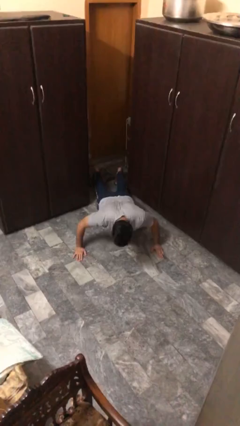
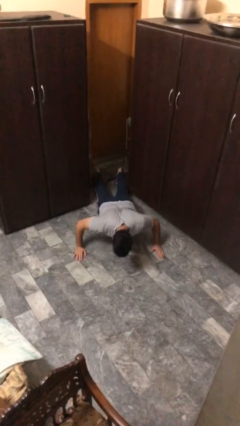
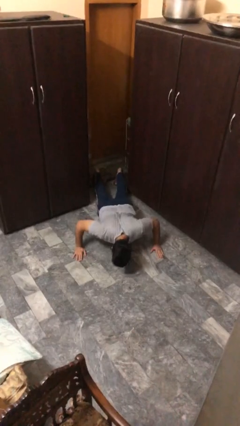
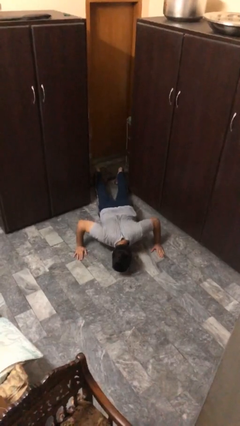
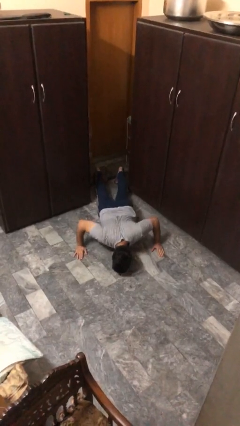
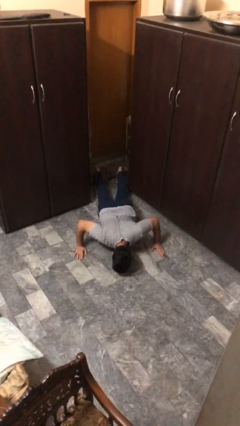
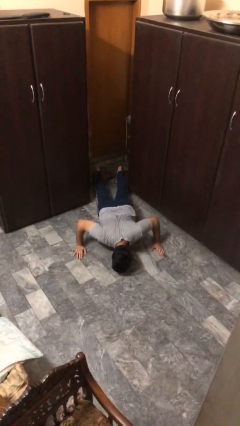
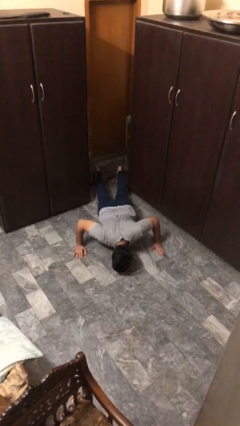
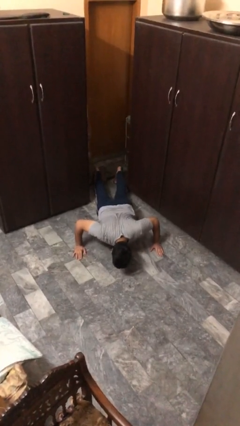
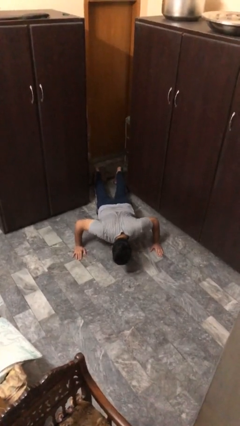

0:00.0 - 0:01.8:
person exercises with pushup

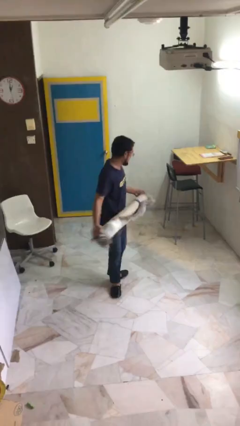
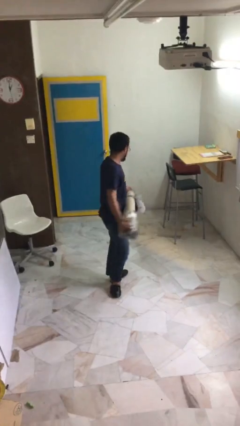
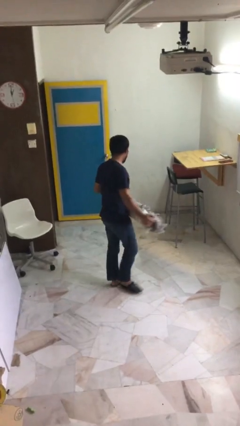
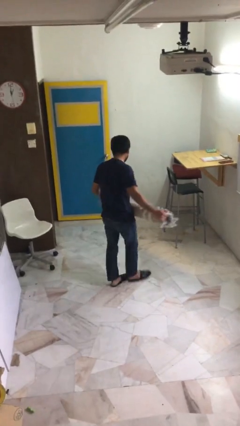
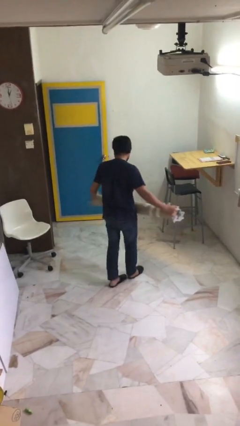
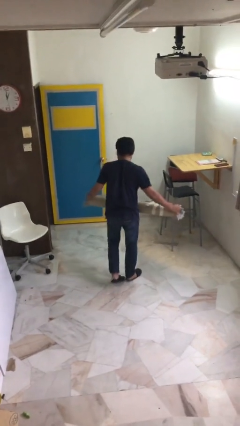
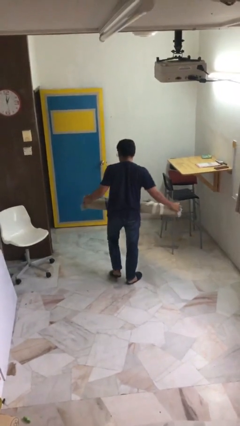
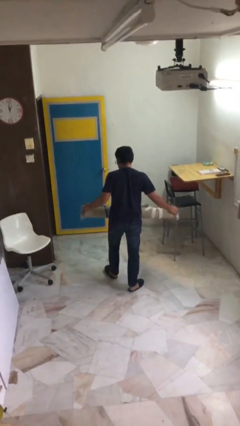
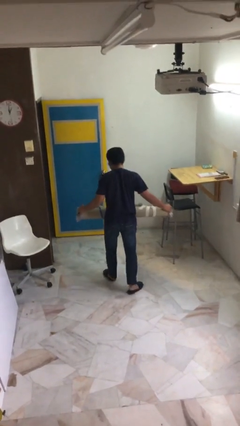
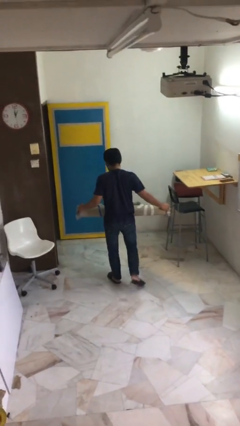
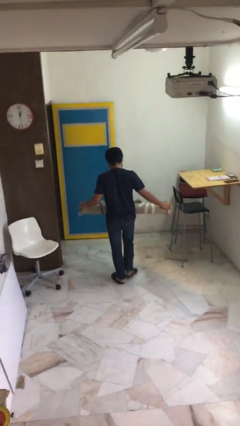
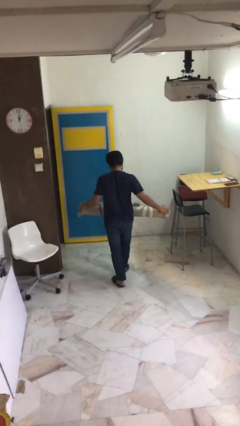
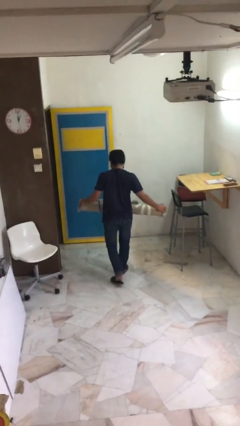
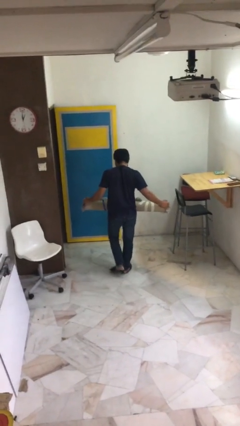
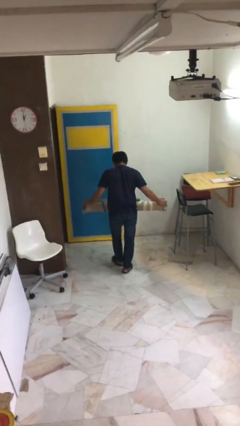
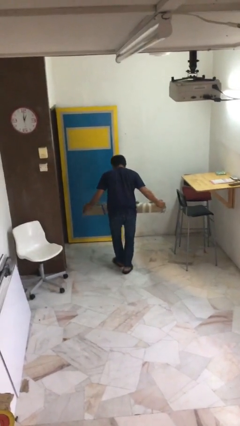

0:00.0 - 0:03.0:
person carries heavy object

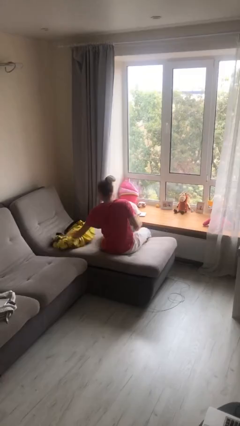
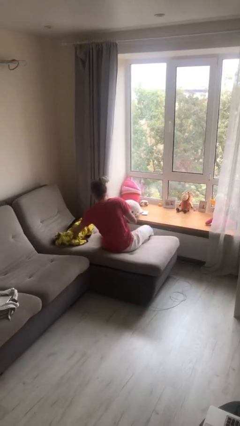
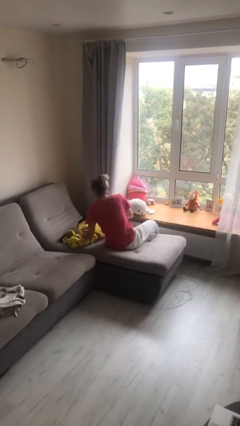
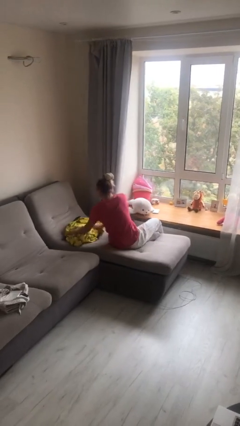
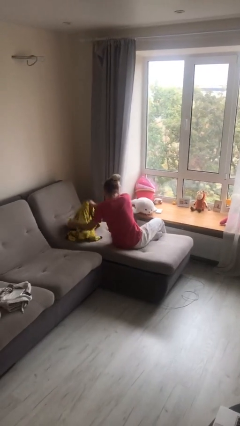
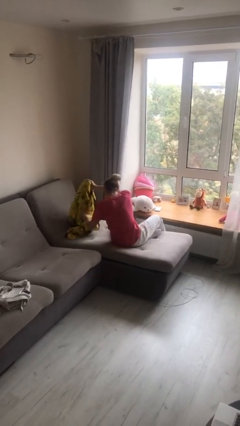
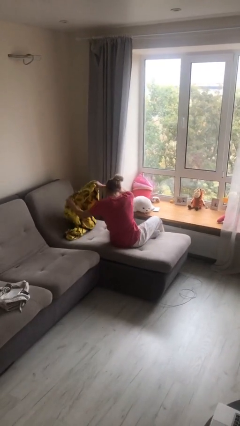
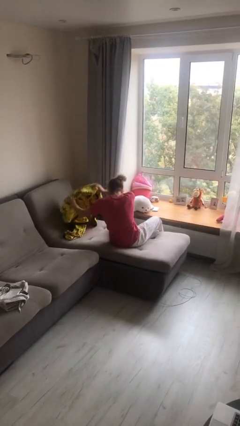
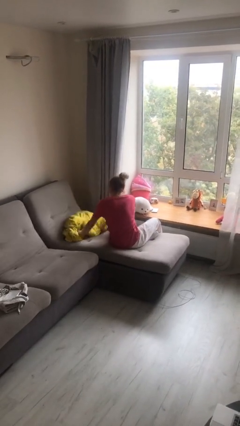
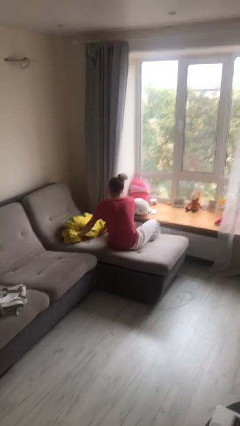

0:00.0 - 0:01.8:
person searches in couch

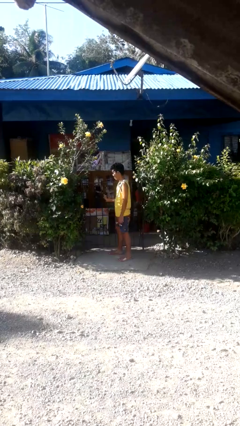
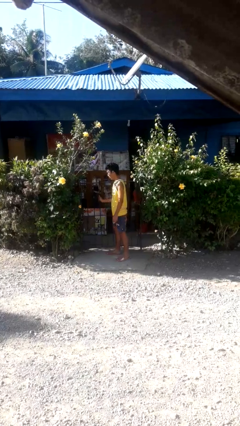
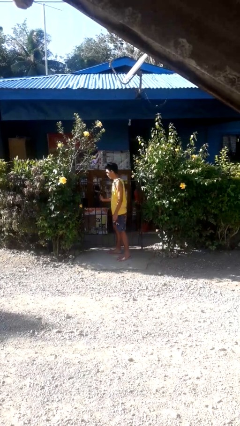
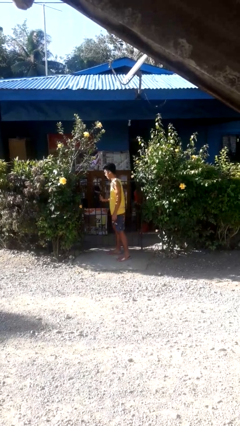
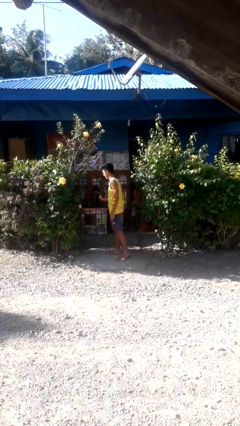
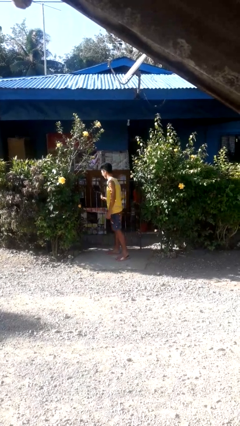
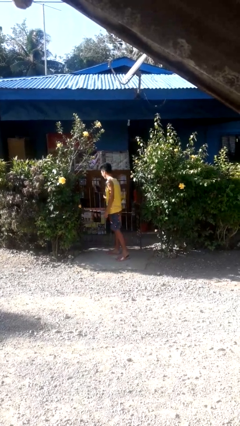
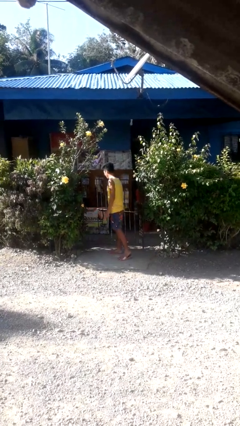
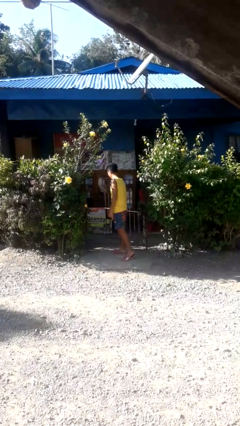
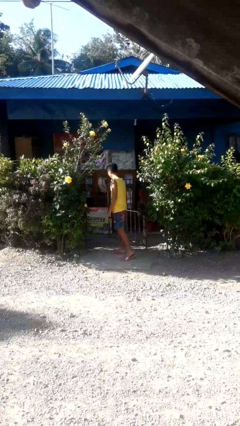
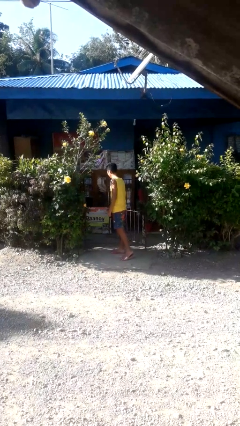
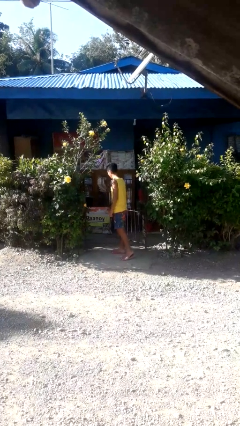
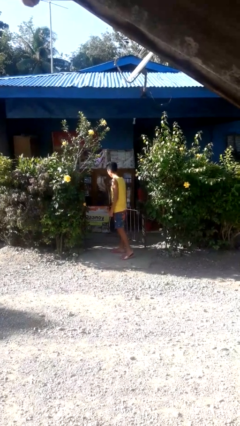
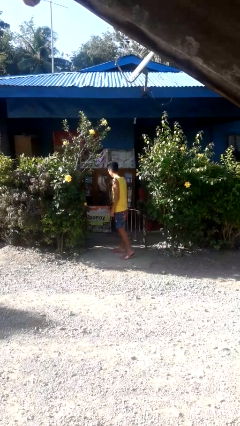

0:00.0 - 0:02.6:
person opens gate

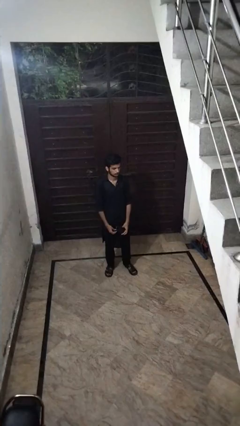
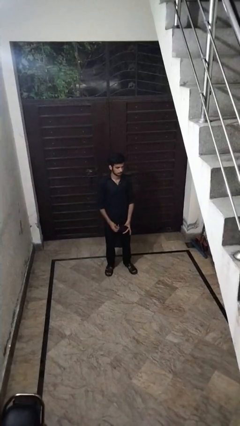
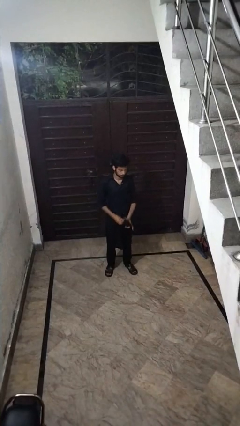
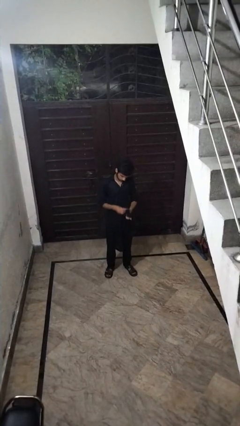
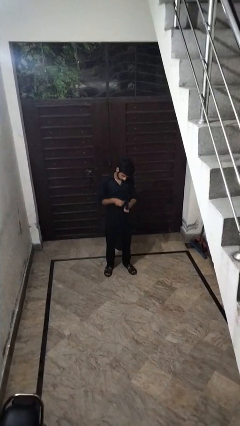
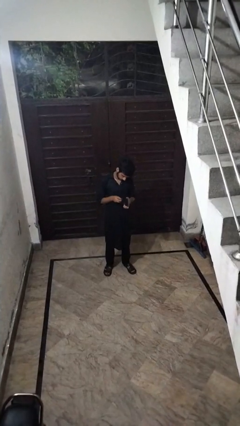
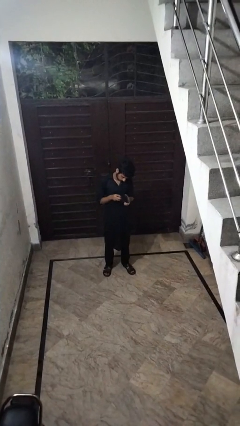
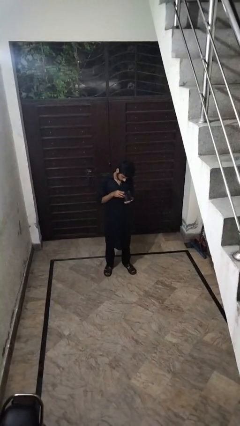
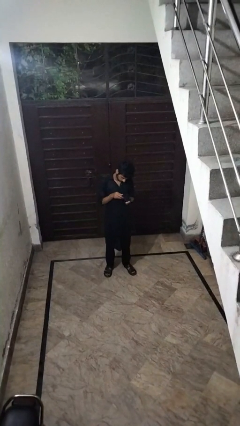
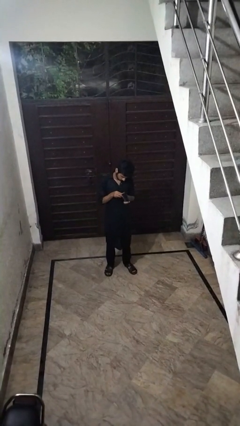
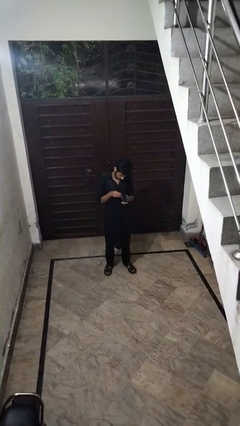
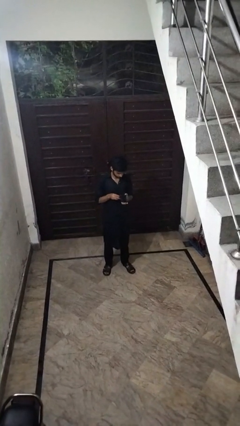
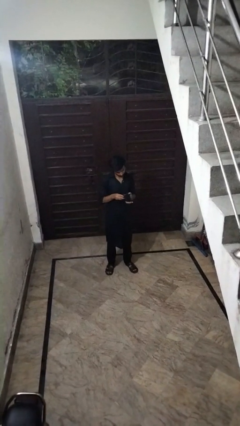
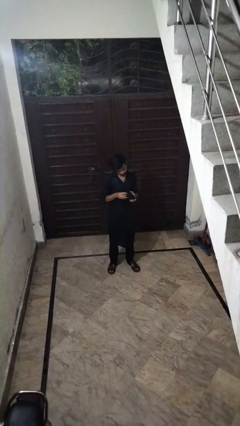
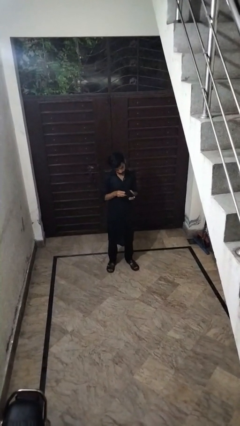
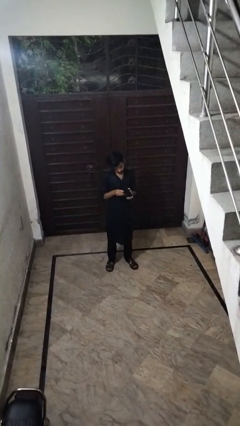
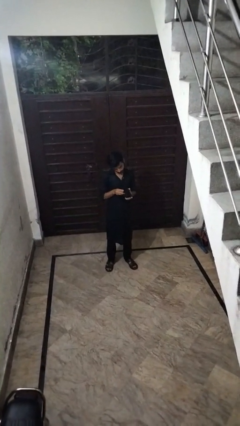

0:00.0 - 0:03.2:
person searches in purse

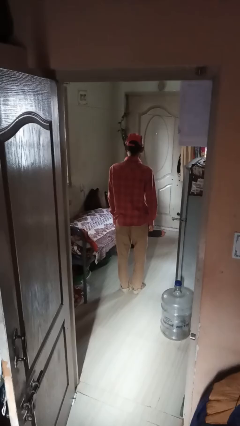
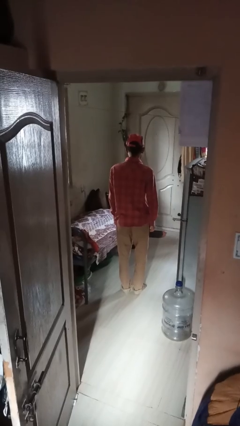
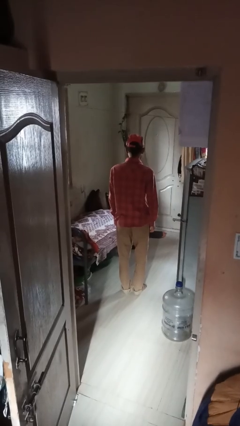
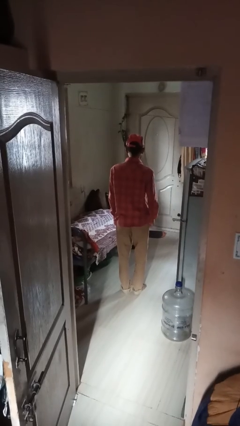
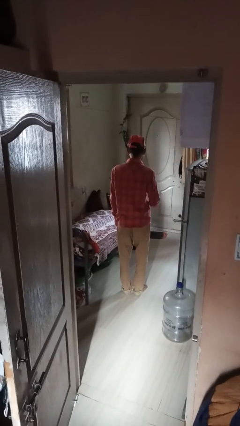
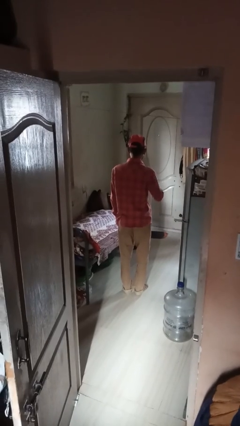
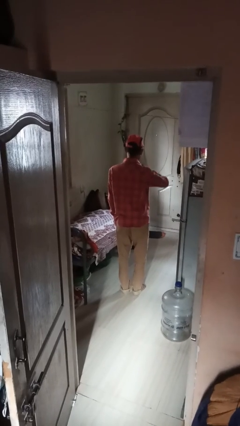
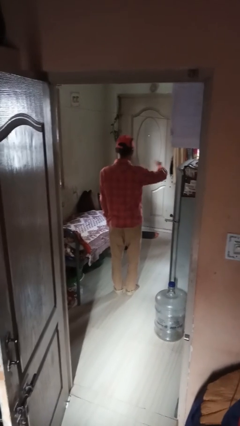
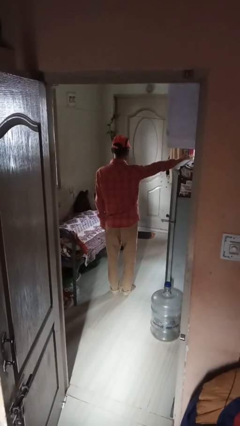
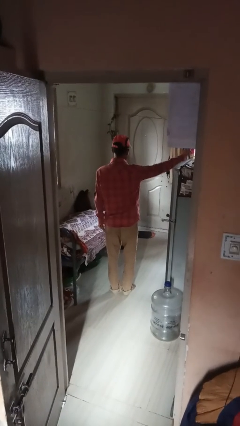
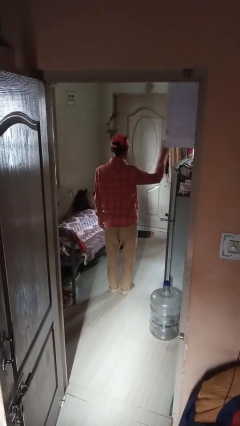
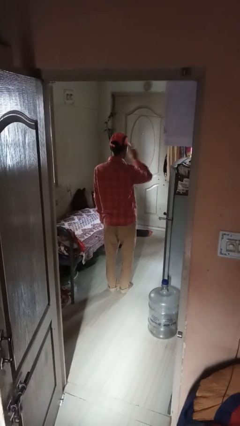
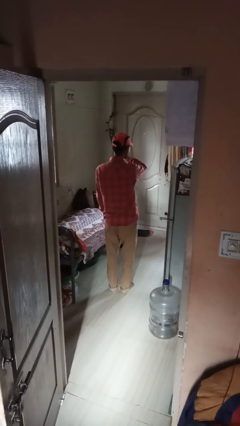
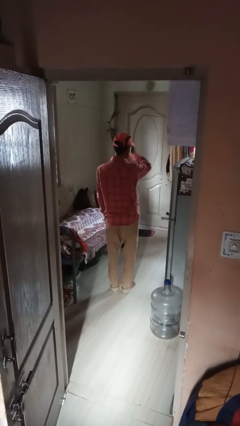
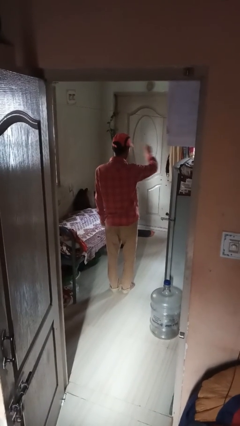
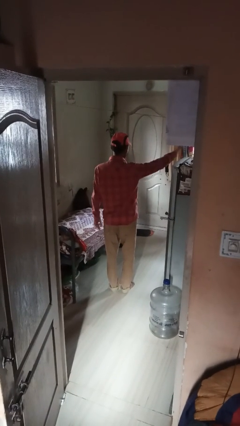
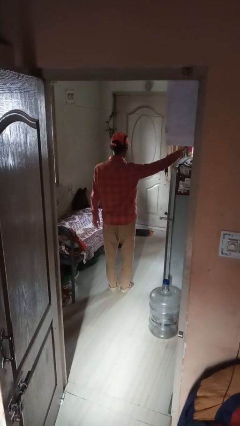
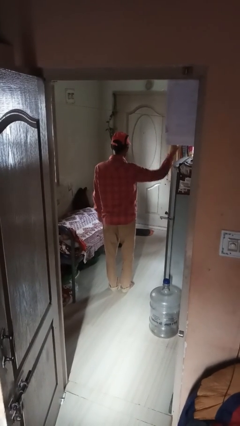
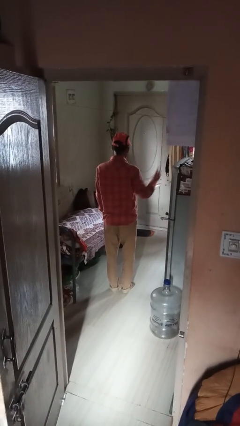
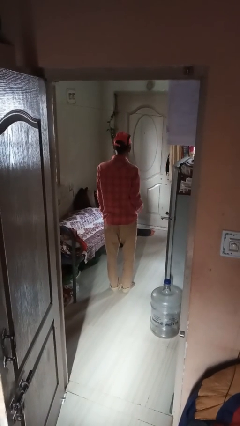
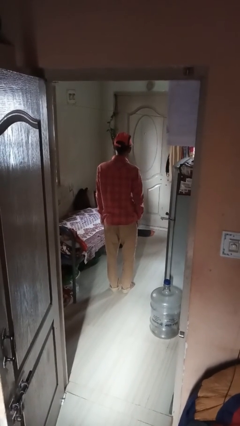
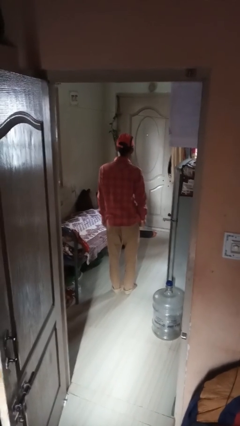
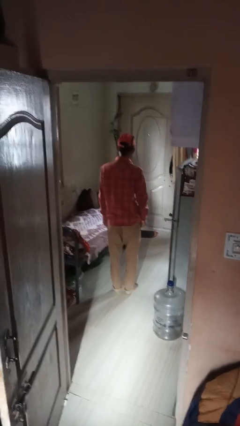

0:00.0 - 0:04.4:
person gestures swipe right

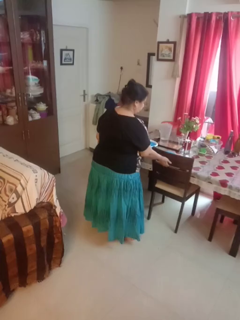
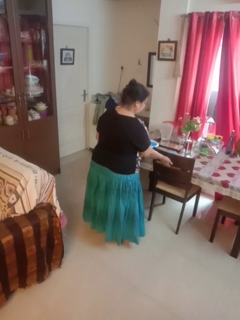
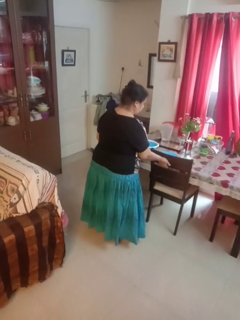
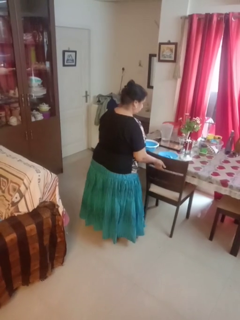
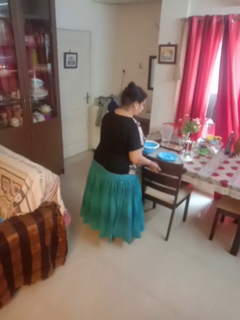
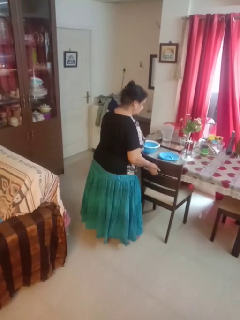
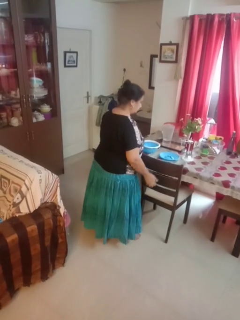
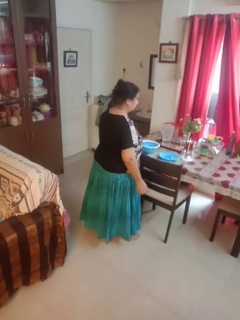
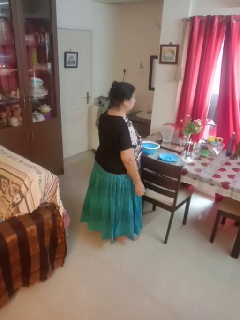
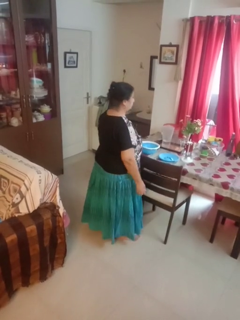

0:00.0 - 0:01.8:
person pulls out chair
